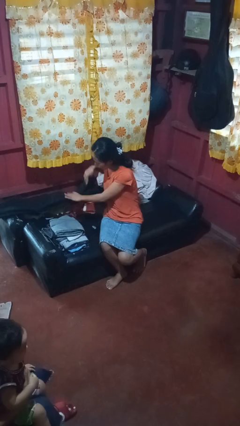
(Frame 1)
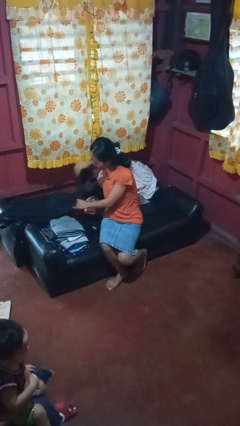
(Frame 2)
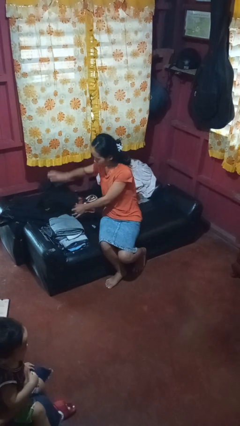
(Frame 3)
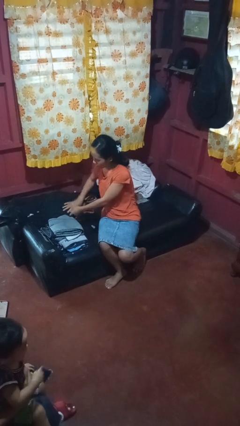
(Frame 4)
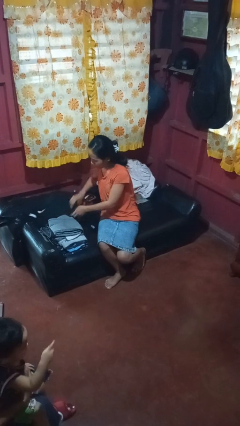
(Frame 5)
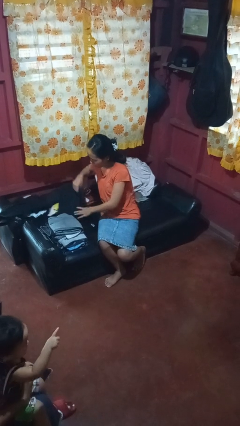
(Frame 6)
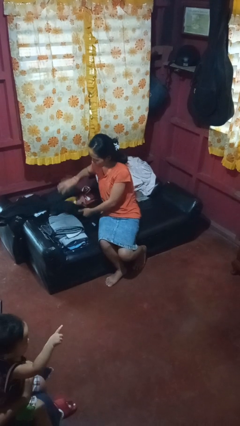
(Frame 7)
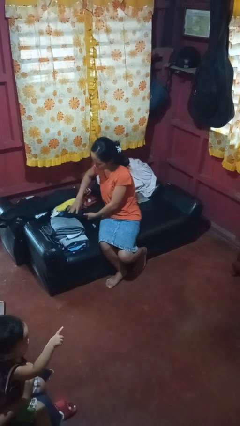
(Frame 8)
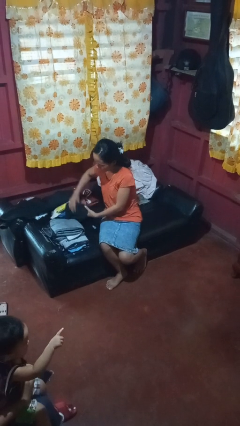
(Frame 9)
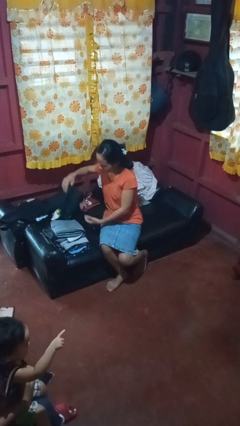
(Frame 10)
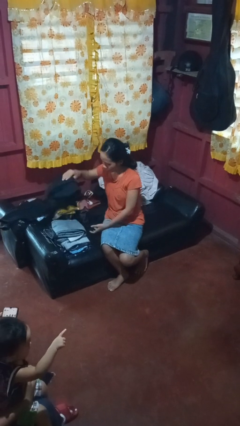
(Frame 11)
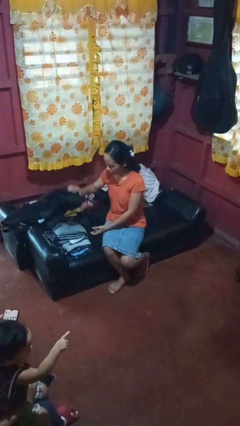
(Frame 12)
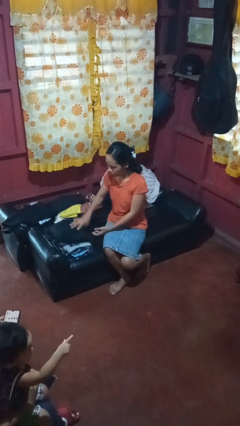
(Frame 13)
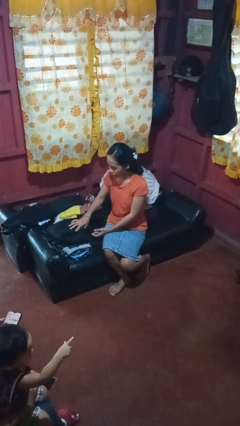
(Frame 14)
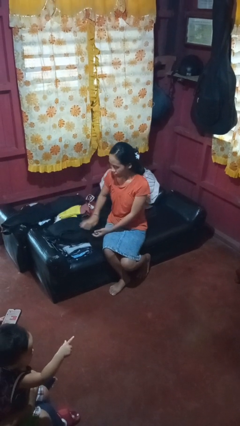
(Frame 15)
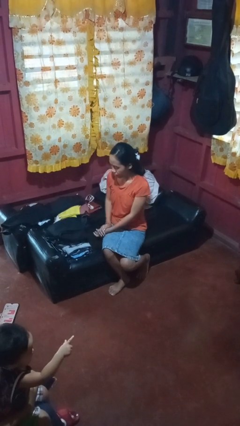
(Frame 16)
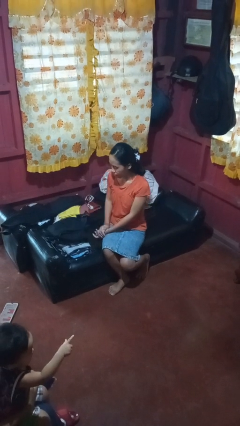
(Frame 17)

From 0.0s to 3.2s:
person folds pants

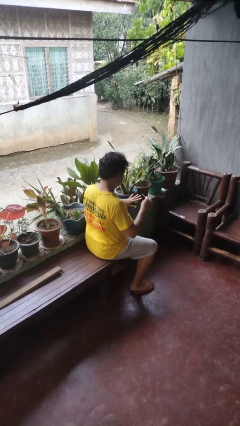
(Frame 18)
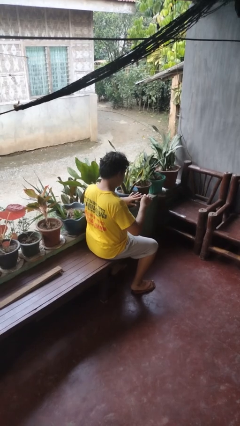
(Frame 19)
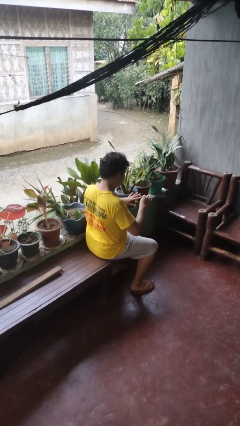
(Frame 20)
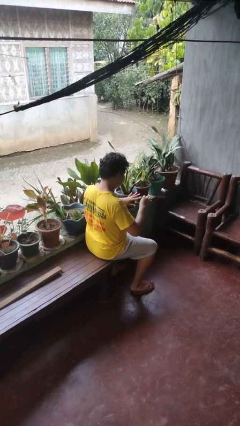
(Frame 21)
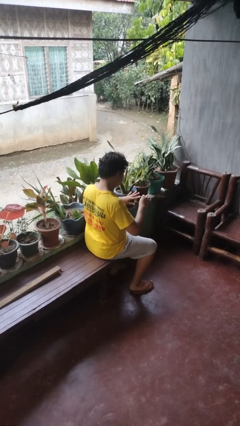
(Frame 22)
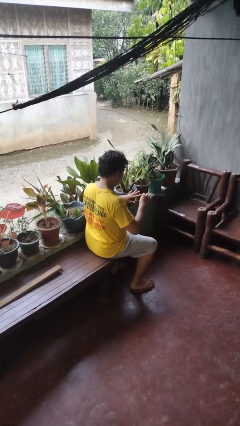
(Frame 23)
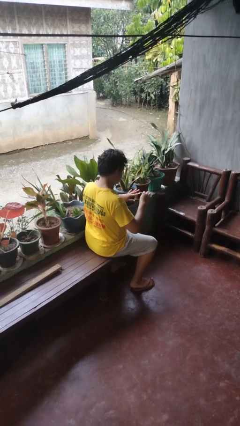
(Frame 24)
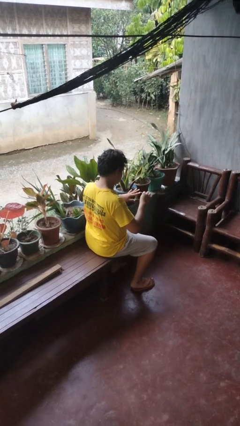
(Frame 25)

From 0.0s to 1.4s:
person files fingernails

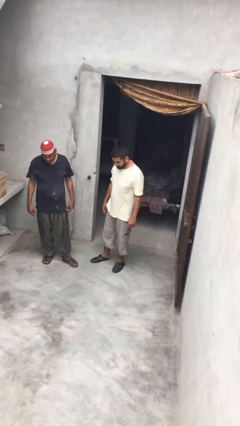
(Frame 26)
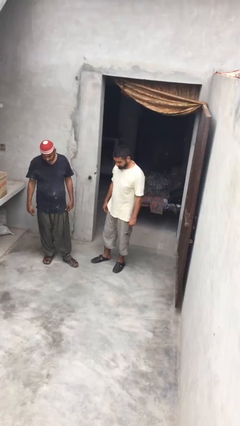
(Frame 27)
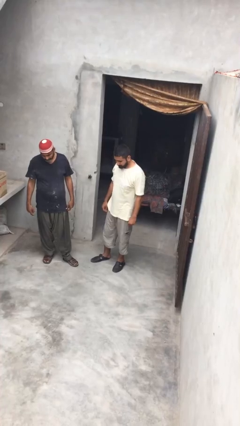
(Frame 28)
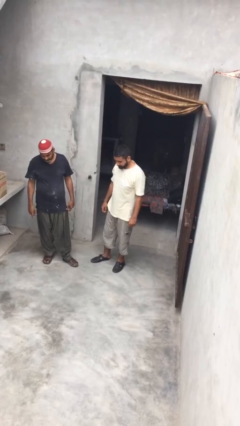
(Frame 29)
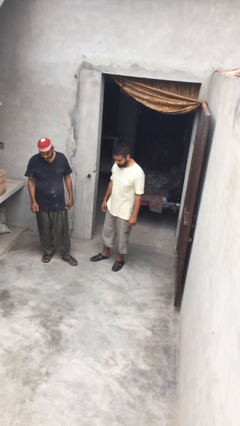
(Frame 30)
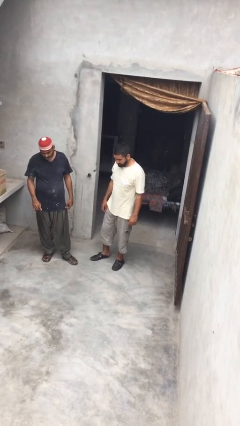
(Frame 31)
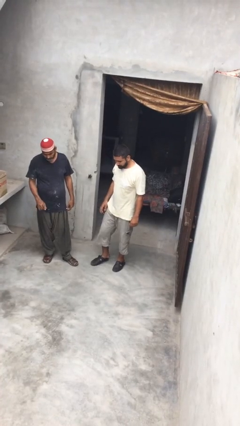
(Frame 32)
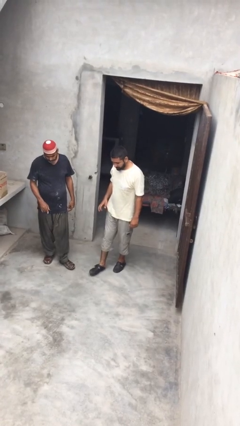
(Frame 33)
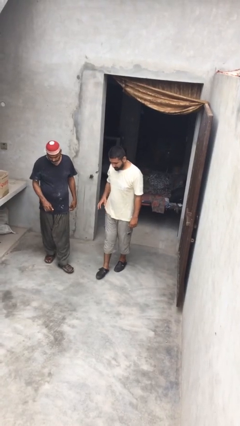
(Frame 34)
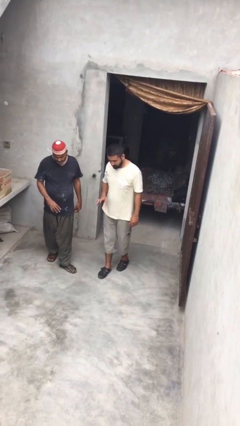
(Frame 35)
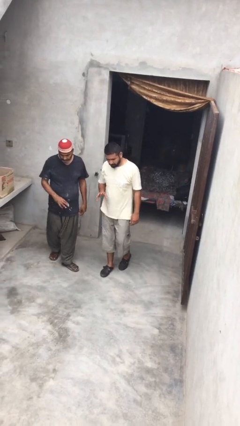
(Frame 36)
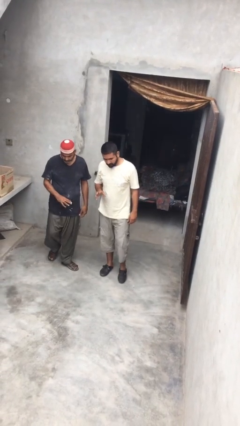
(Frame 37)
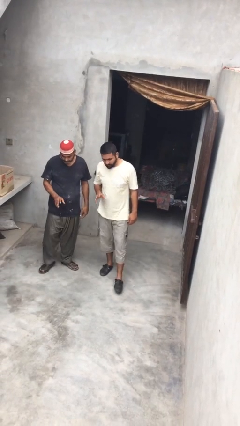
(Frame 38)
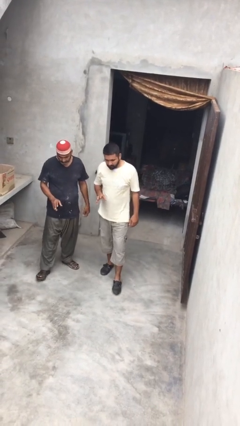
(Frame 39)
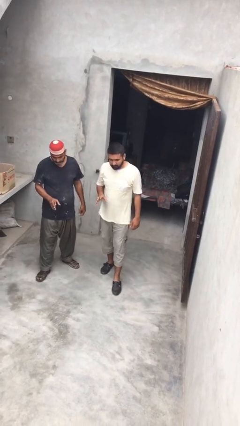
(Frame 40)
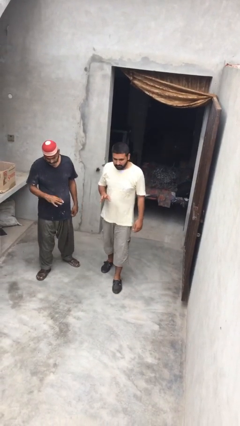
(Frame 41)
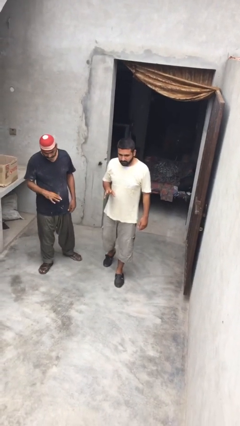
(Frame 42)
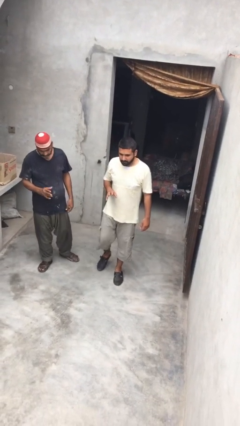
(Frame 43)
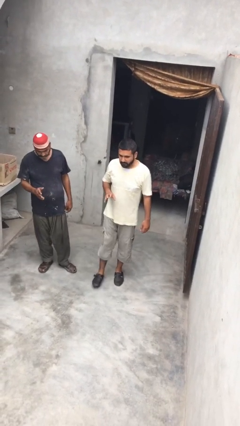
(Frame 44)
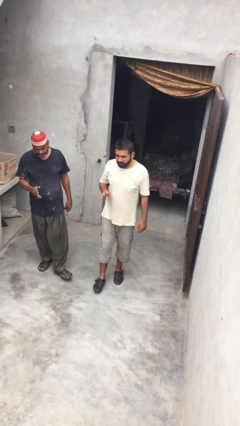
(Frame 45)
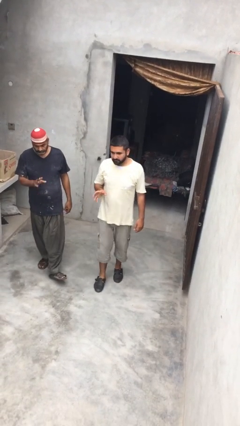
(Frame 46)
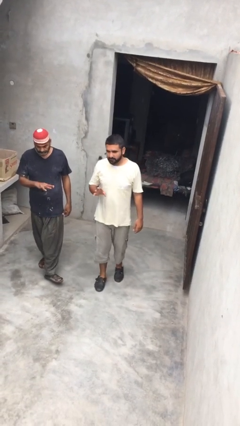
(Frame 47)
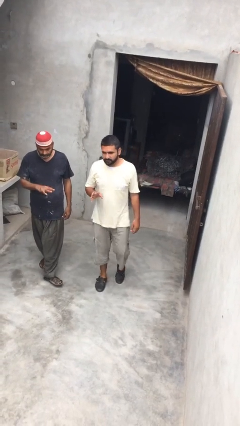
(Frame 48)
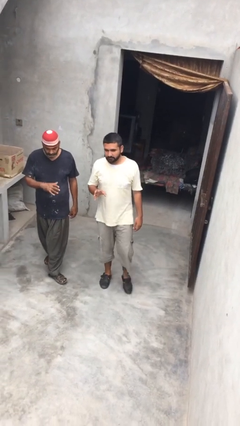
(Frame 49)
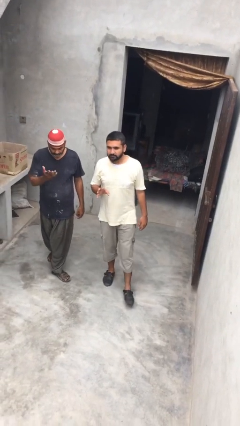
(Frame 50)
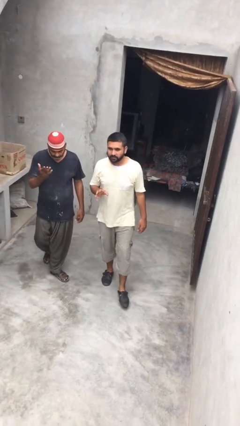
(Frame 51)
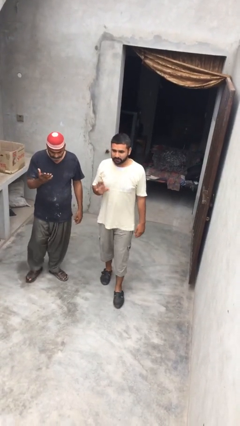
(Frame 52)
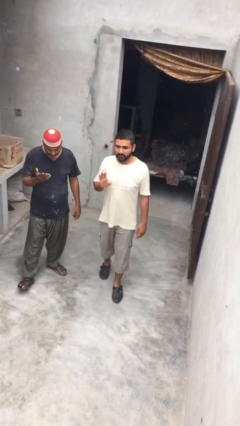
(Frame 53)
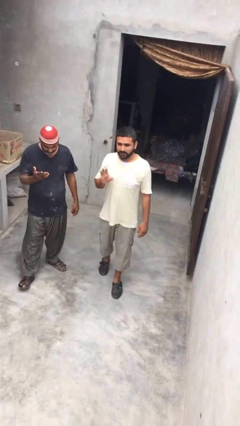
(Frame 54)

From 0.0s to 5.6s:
person talks to person

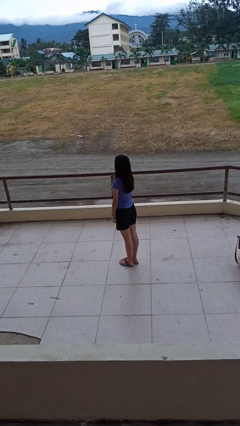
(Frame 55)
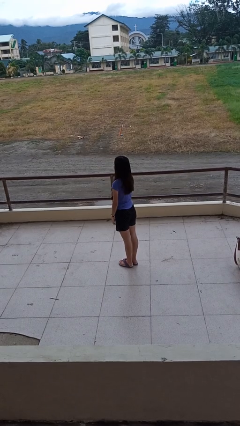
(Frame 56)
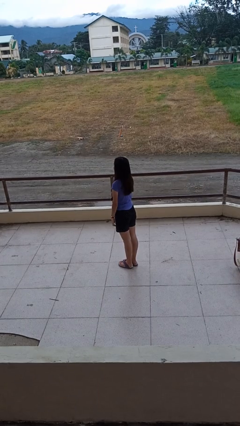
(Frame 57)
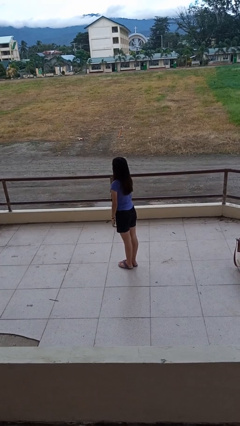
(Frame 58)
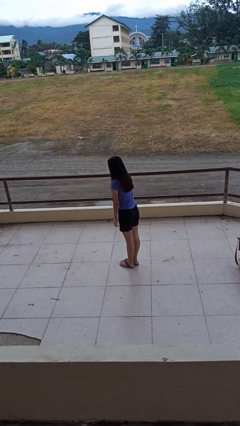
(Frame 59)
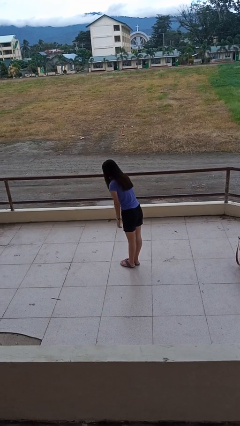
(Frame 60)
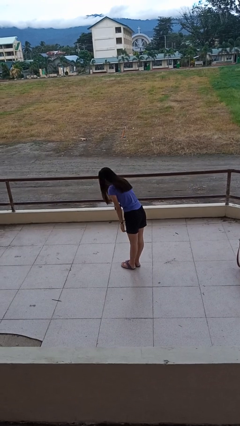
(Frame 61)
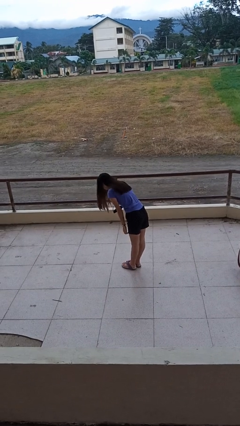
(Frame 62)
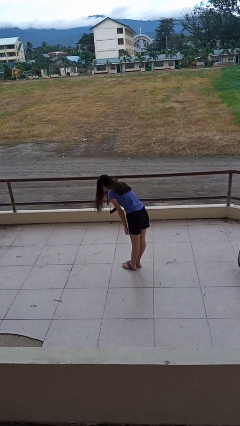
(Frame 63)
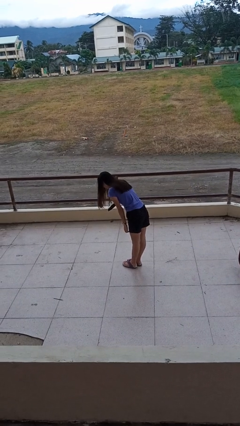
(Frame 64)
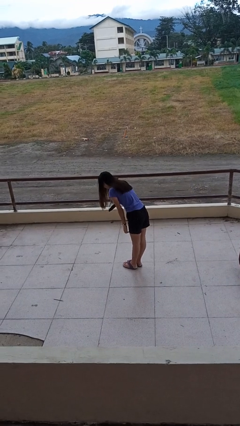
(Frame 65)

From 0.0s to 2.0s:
person bows

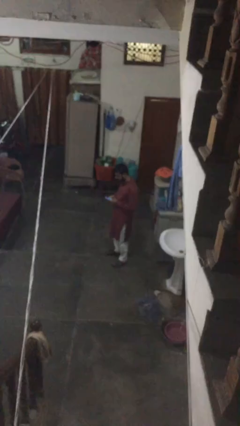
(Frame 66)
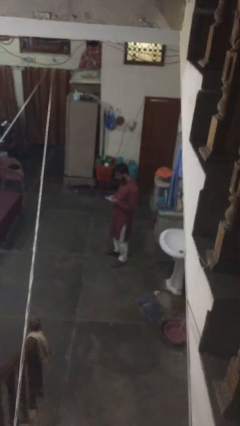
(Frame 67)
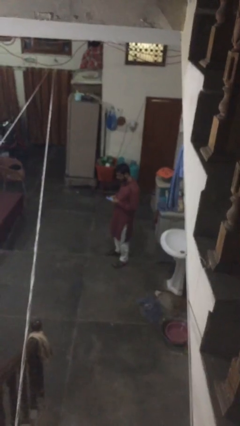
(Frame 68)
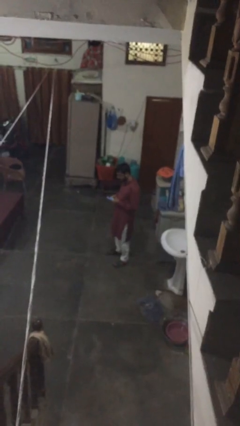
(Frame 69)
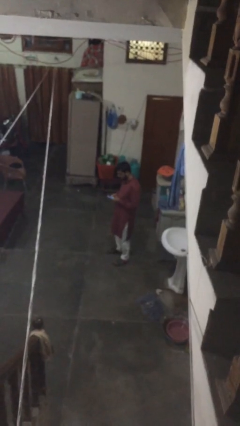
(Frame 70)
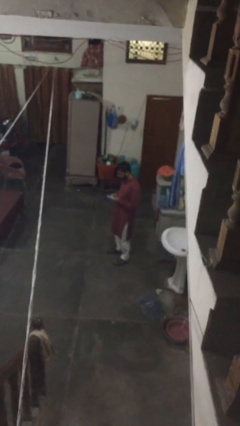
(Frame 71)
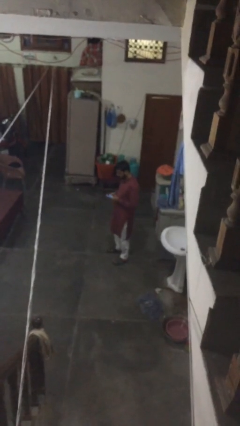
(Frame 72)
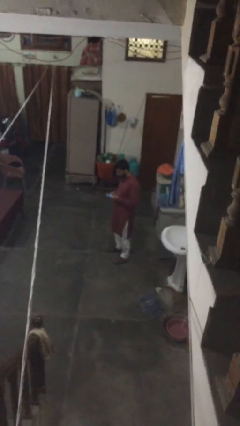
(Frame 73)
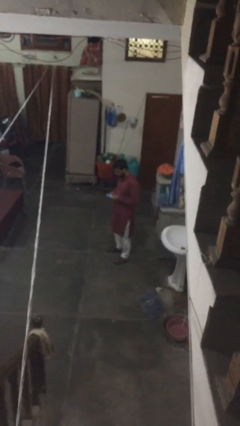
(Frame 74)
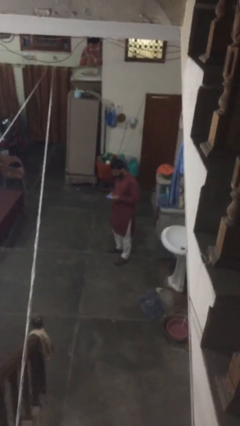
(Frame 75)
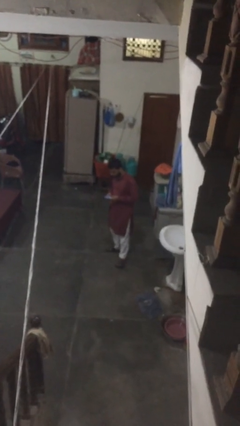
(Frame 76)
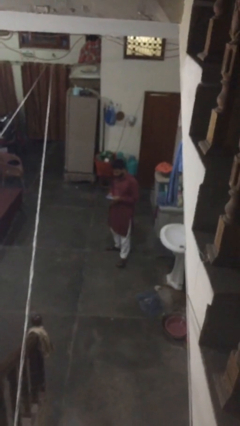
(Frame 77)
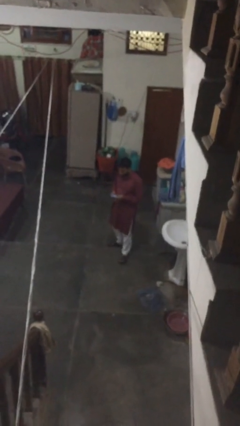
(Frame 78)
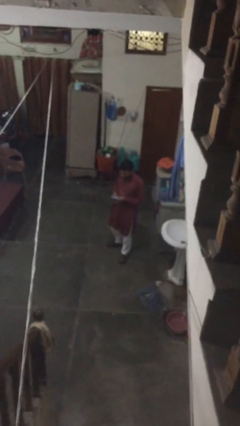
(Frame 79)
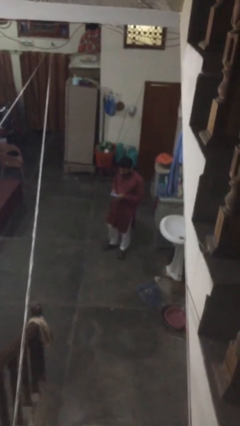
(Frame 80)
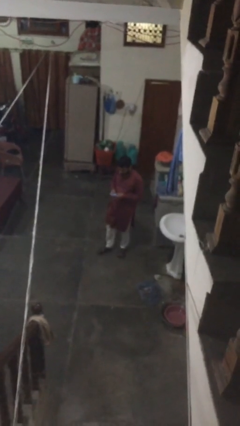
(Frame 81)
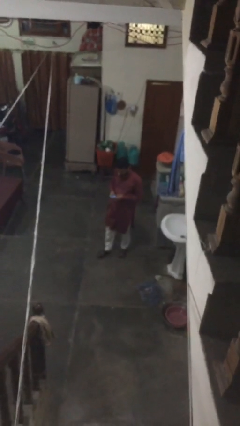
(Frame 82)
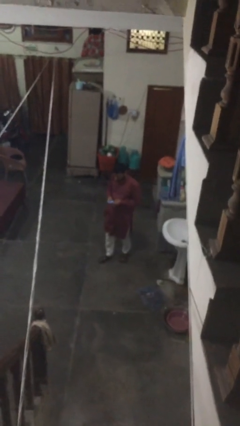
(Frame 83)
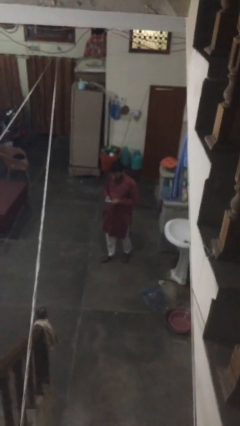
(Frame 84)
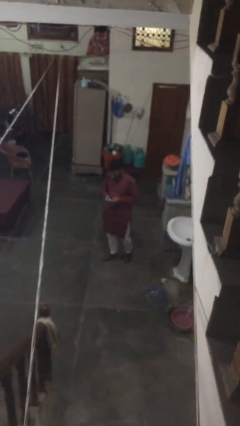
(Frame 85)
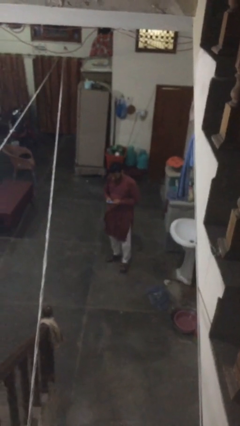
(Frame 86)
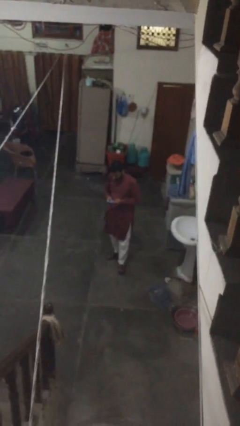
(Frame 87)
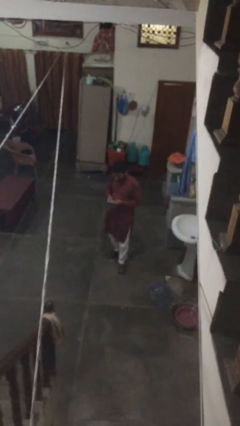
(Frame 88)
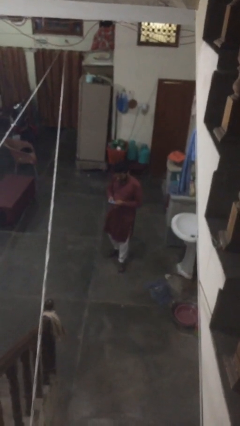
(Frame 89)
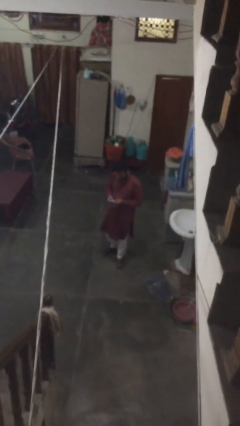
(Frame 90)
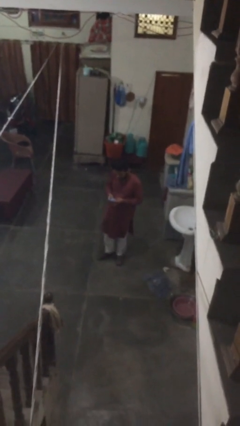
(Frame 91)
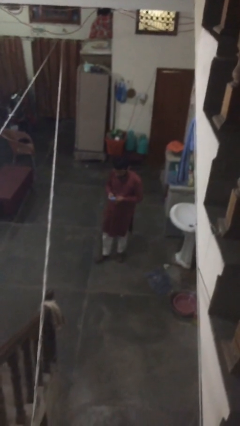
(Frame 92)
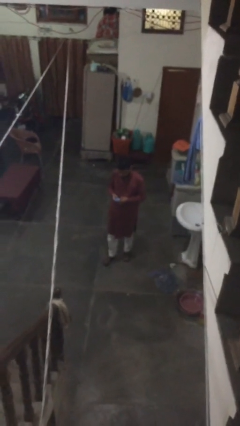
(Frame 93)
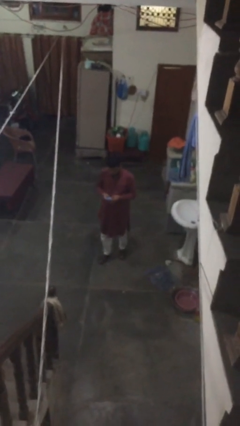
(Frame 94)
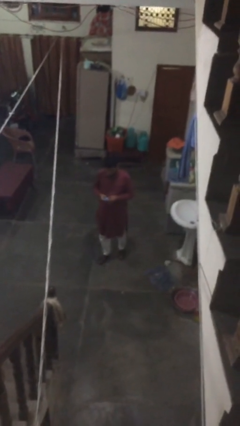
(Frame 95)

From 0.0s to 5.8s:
person texts on phone
